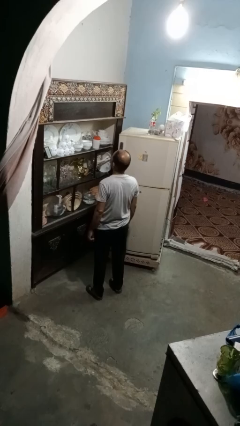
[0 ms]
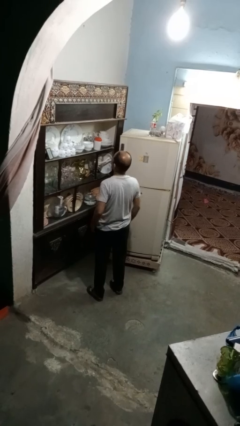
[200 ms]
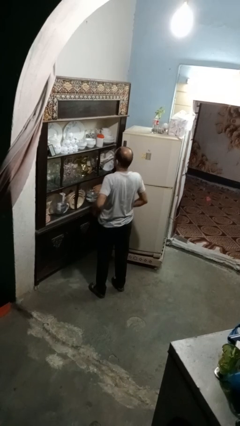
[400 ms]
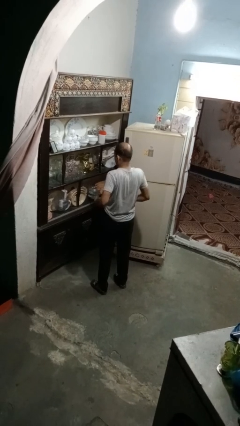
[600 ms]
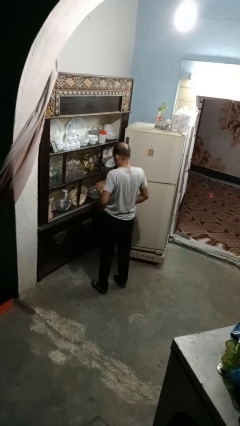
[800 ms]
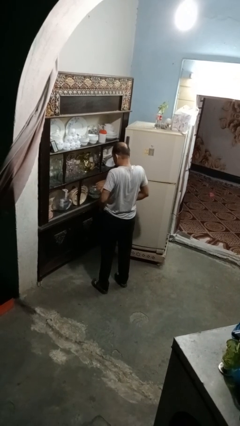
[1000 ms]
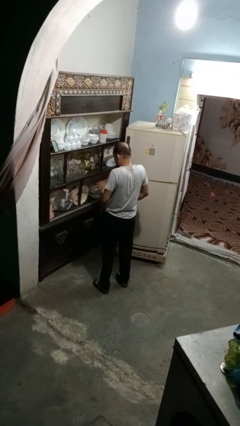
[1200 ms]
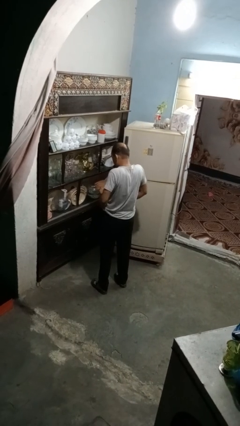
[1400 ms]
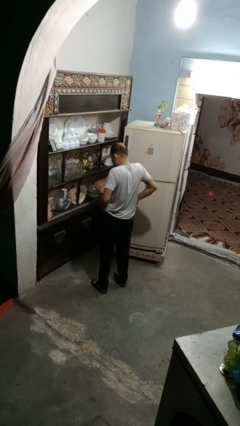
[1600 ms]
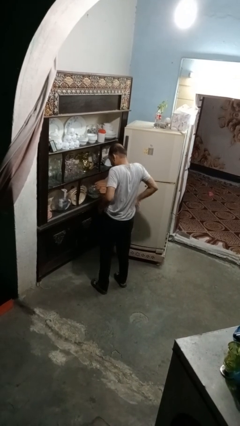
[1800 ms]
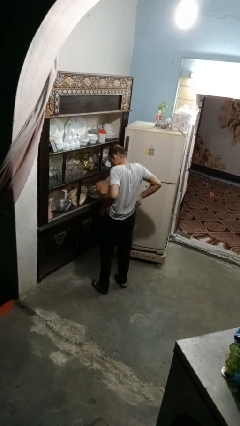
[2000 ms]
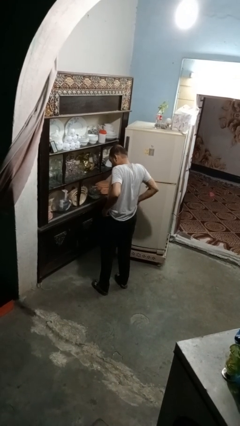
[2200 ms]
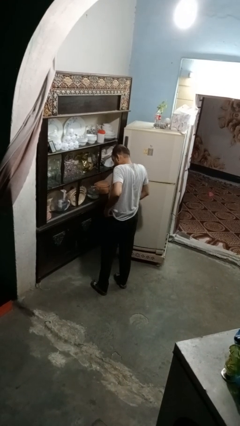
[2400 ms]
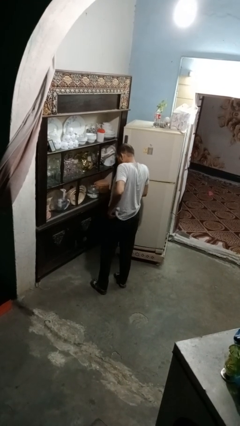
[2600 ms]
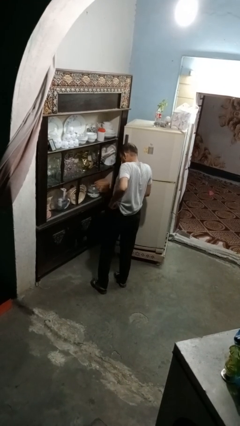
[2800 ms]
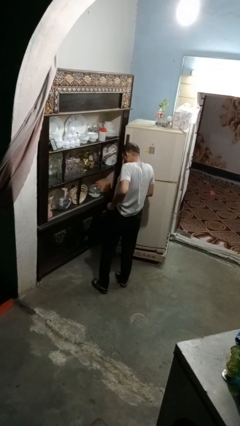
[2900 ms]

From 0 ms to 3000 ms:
person hikes up pants

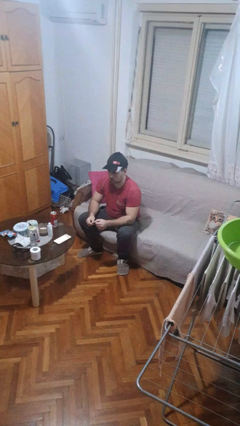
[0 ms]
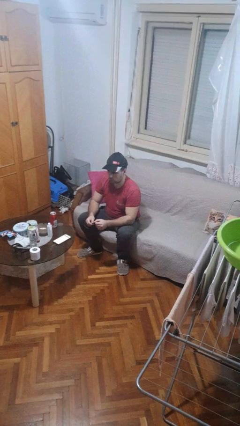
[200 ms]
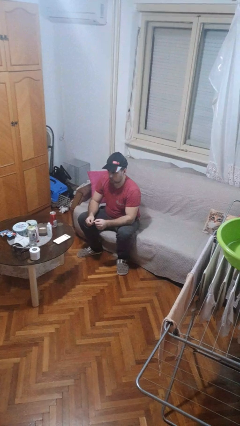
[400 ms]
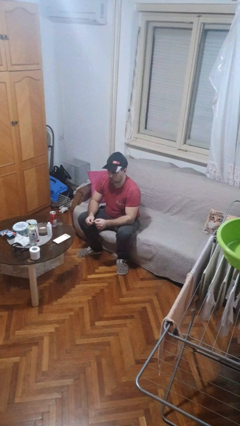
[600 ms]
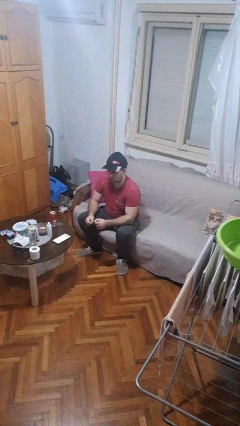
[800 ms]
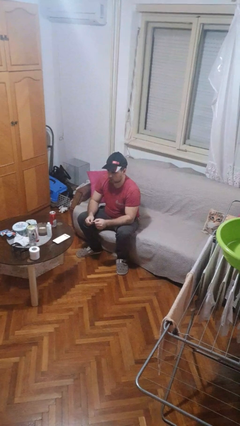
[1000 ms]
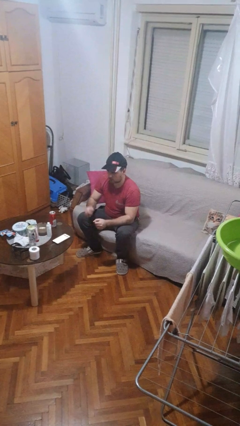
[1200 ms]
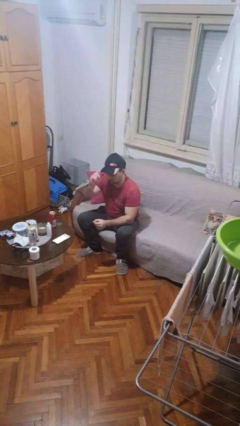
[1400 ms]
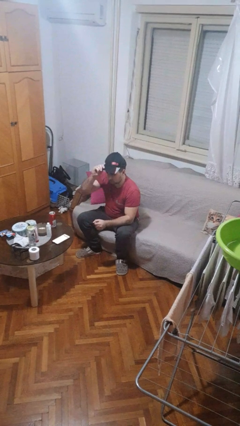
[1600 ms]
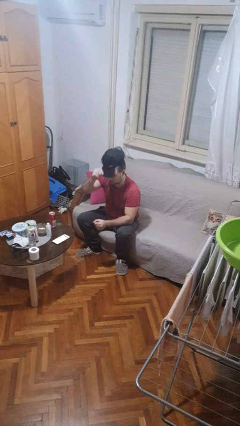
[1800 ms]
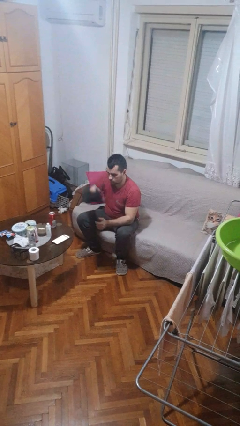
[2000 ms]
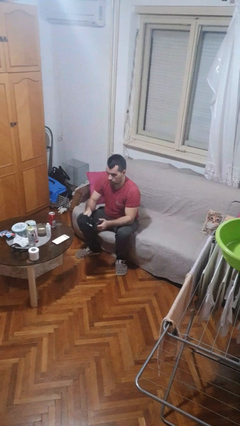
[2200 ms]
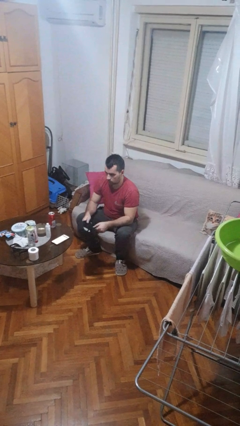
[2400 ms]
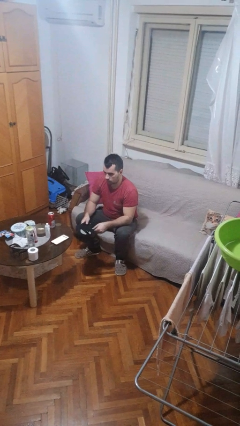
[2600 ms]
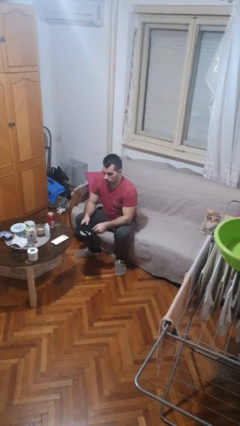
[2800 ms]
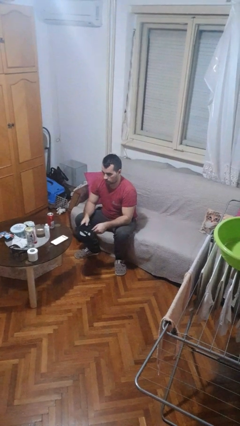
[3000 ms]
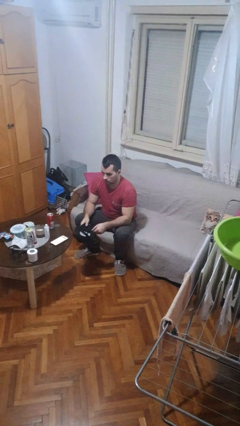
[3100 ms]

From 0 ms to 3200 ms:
person takes off hat

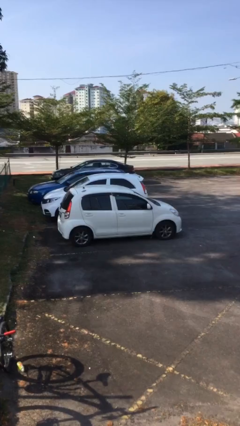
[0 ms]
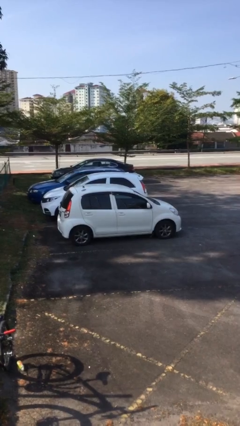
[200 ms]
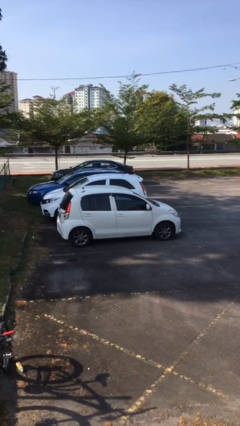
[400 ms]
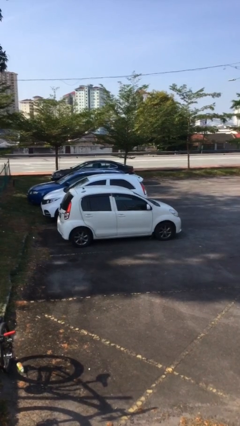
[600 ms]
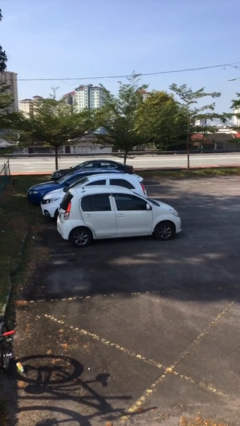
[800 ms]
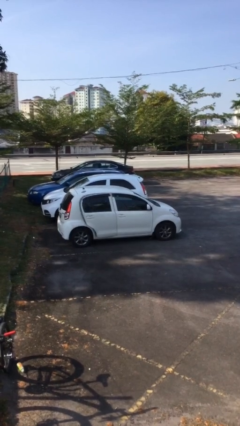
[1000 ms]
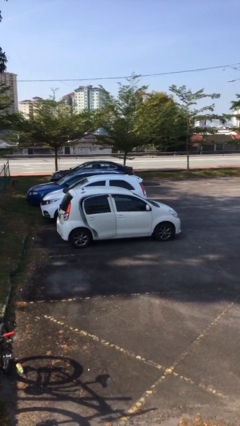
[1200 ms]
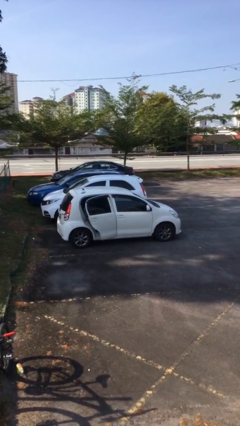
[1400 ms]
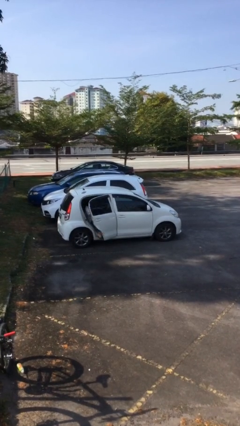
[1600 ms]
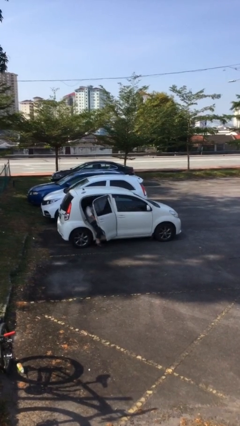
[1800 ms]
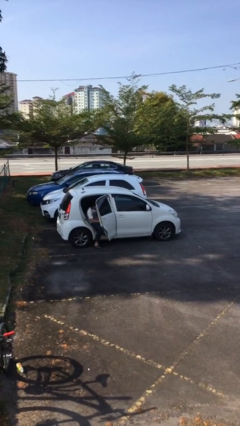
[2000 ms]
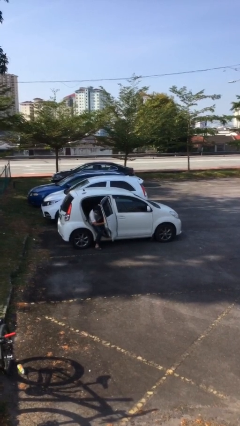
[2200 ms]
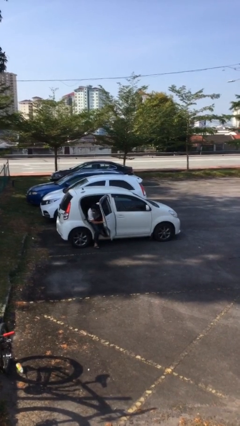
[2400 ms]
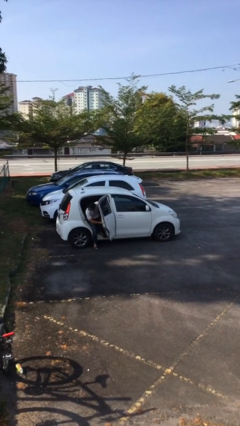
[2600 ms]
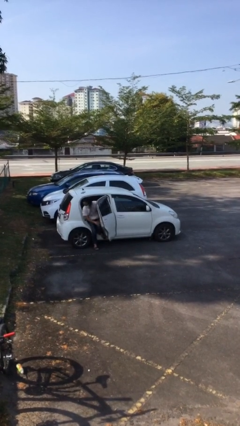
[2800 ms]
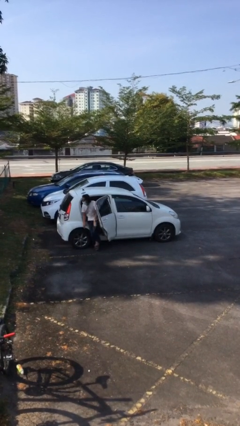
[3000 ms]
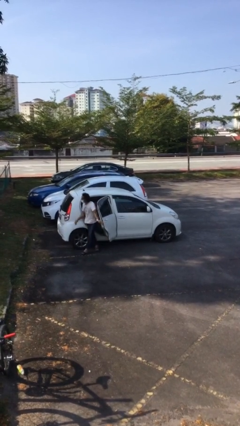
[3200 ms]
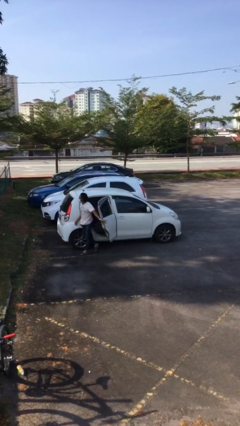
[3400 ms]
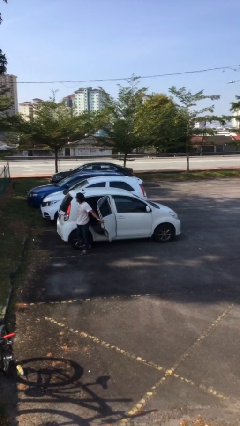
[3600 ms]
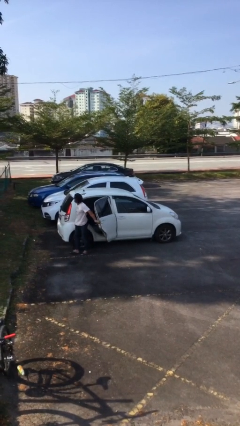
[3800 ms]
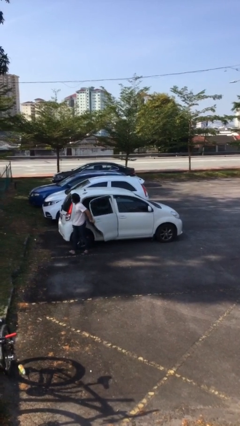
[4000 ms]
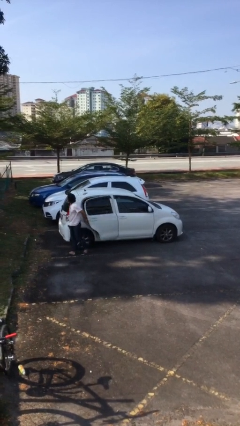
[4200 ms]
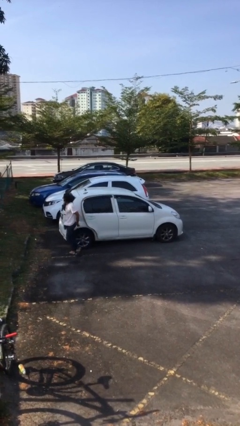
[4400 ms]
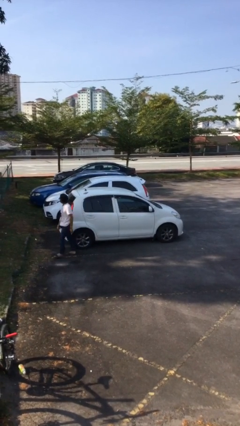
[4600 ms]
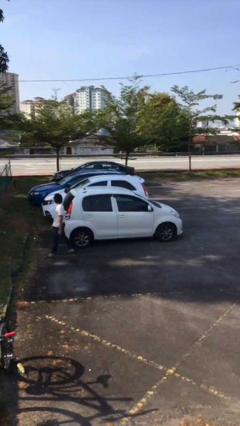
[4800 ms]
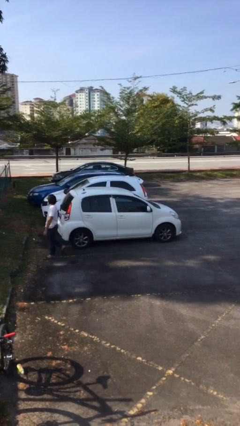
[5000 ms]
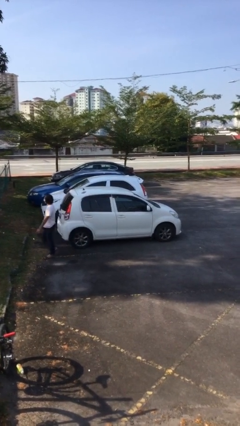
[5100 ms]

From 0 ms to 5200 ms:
car drops off person

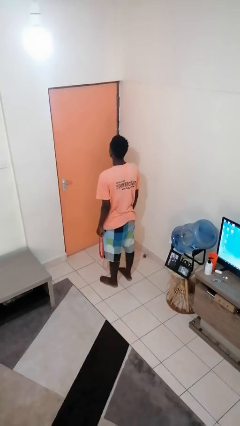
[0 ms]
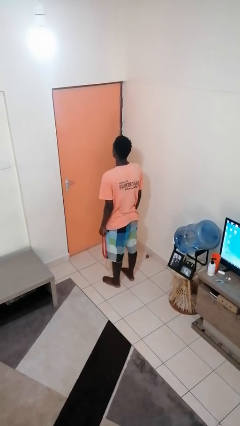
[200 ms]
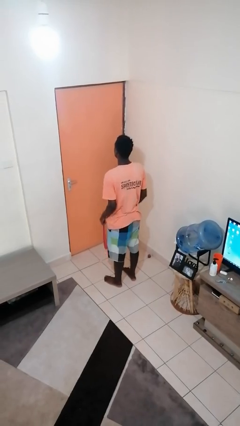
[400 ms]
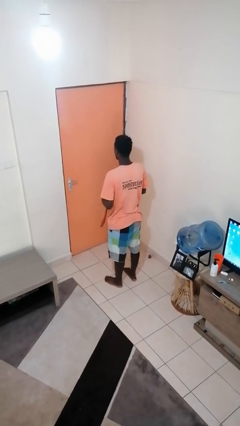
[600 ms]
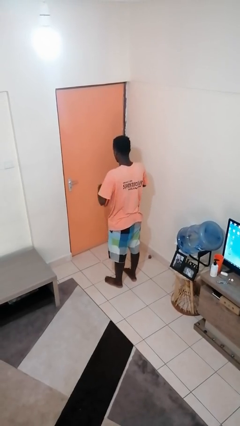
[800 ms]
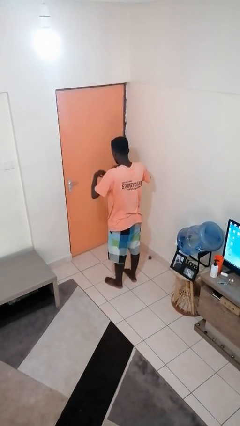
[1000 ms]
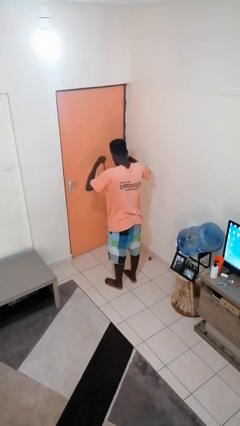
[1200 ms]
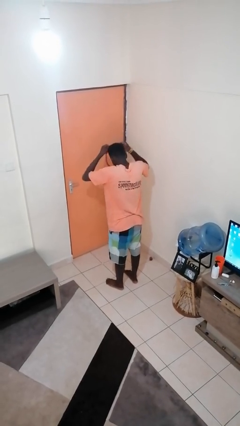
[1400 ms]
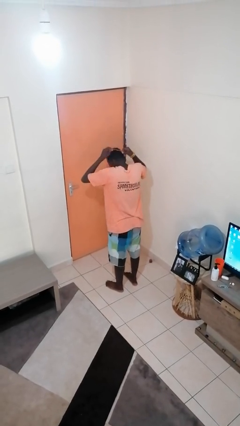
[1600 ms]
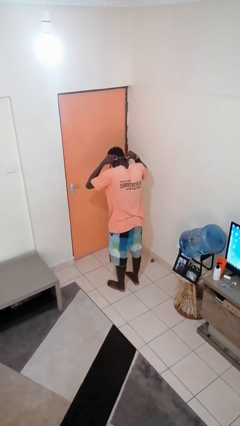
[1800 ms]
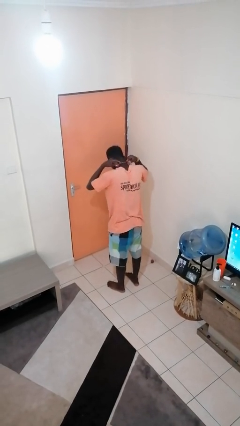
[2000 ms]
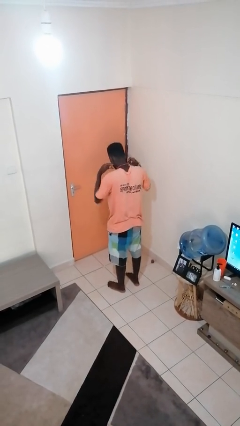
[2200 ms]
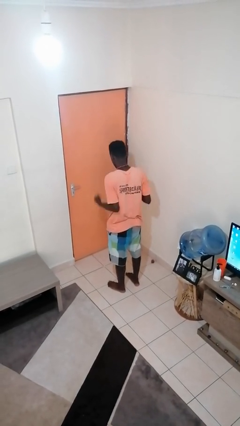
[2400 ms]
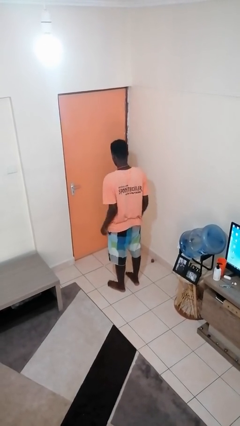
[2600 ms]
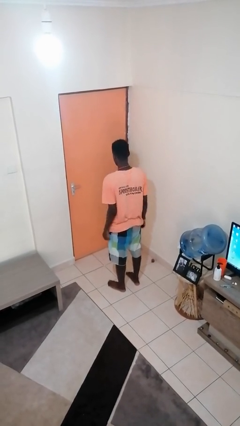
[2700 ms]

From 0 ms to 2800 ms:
person puts on necklace

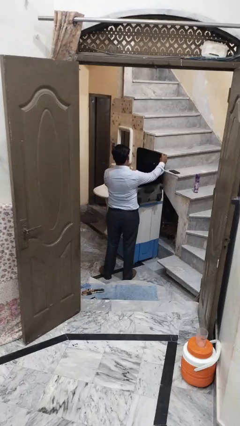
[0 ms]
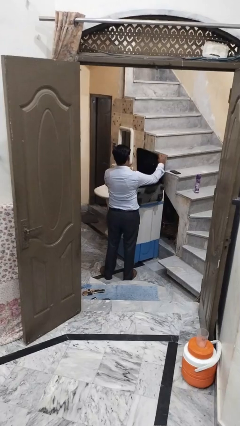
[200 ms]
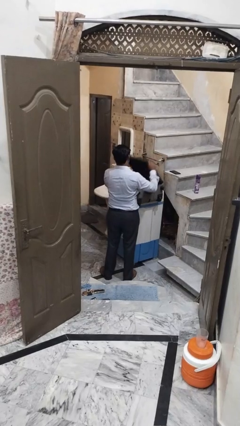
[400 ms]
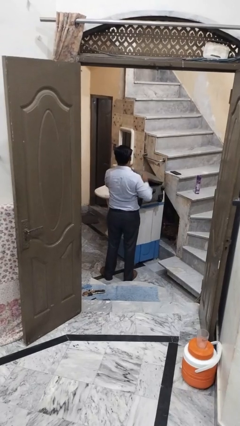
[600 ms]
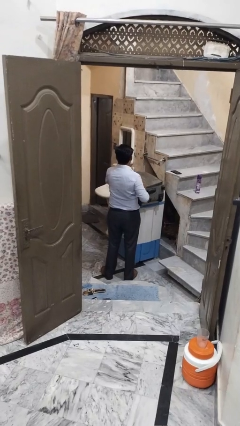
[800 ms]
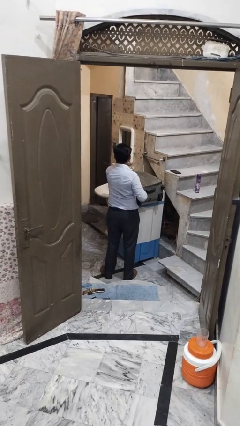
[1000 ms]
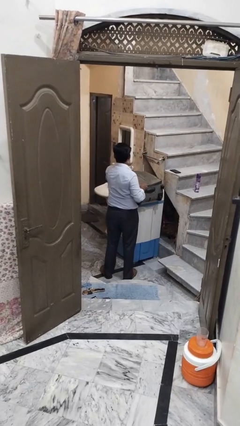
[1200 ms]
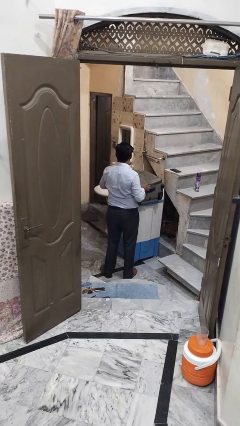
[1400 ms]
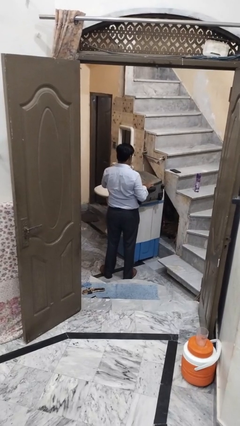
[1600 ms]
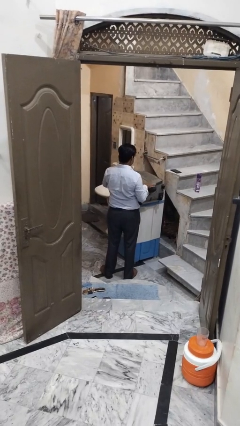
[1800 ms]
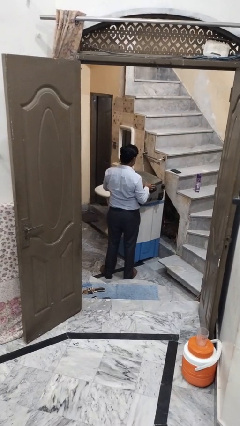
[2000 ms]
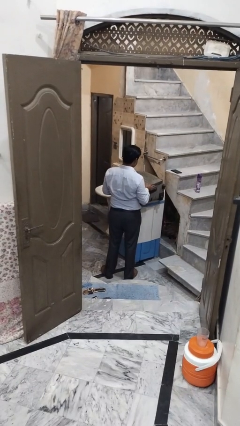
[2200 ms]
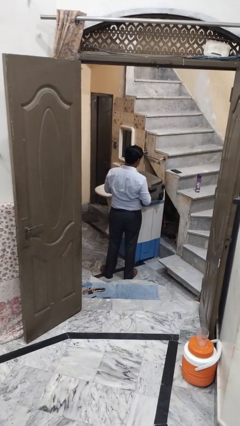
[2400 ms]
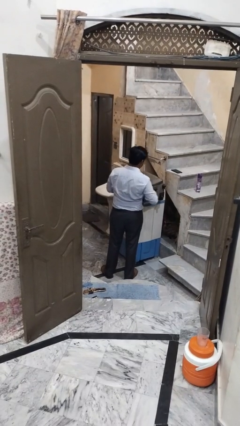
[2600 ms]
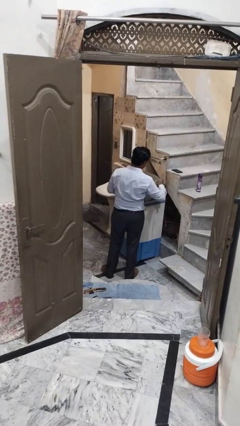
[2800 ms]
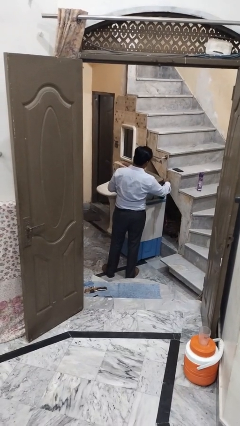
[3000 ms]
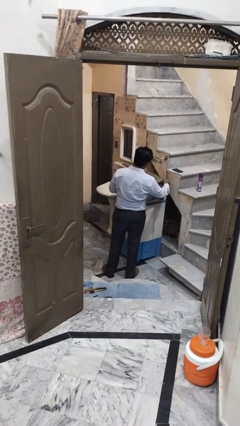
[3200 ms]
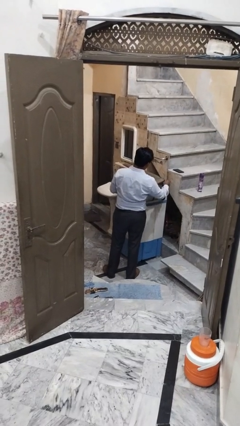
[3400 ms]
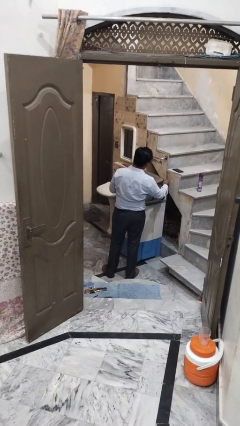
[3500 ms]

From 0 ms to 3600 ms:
person closes suitcase
